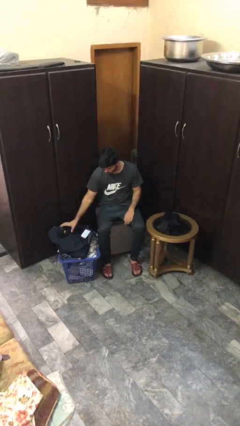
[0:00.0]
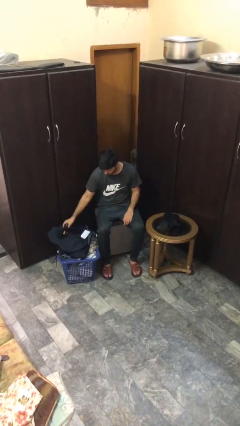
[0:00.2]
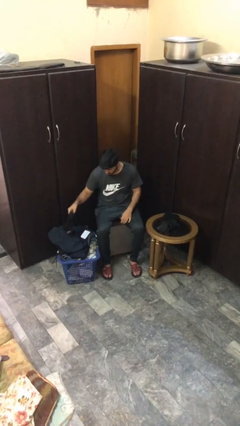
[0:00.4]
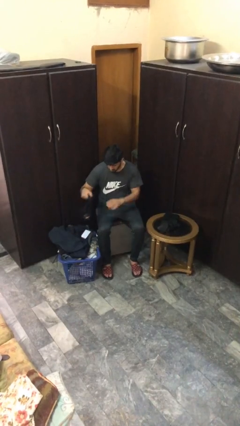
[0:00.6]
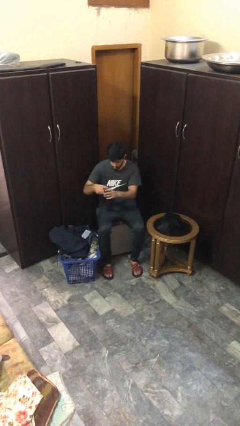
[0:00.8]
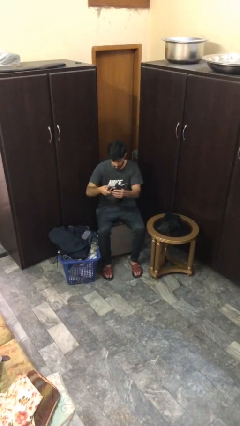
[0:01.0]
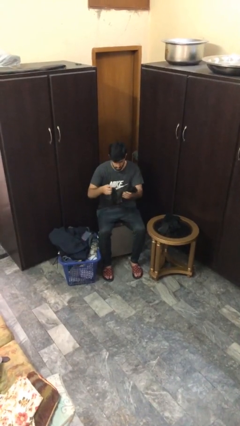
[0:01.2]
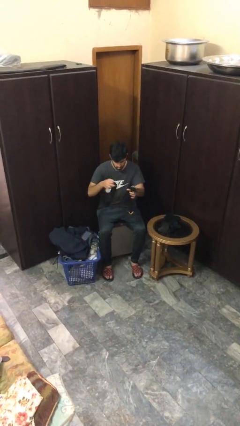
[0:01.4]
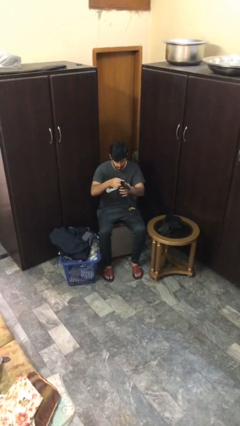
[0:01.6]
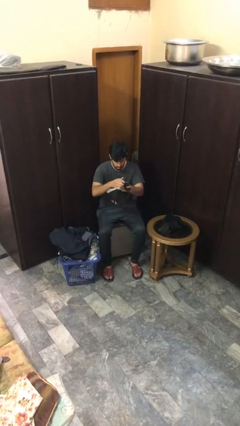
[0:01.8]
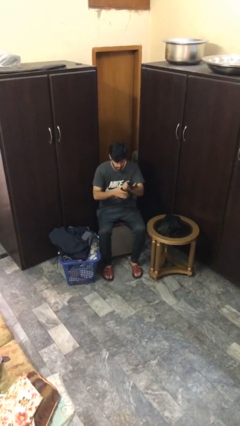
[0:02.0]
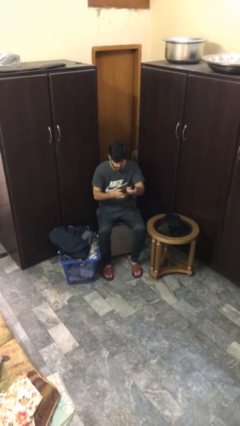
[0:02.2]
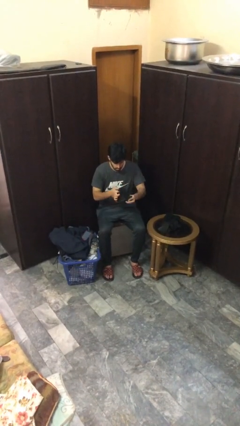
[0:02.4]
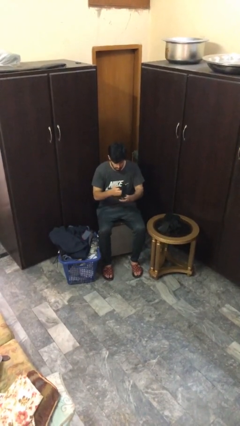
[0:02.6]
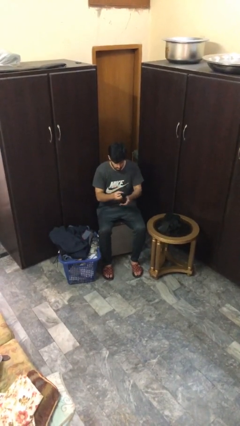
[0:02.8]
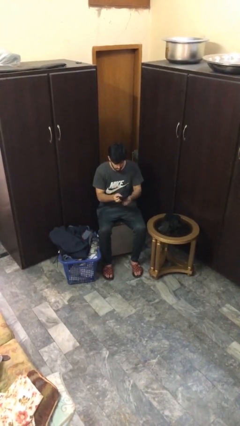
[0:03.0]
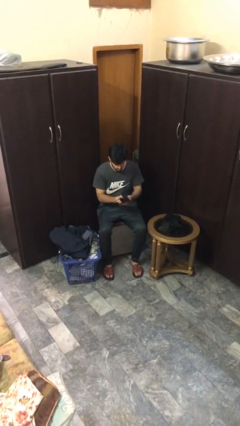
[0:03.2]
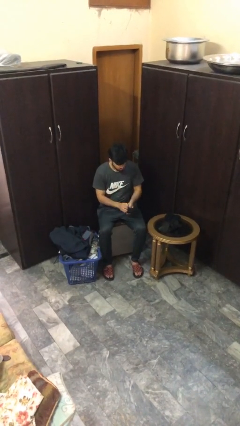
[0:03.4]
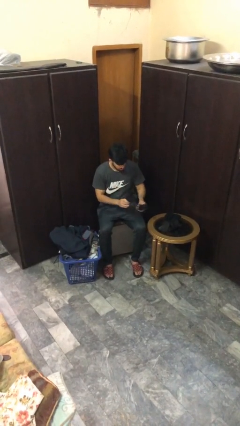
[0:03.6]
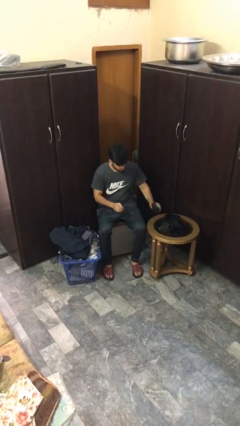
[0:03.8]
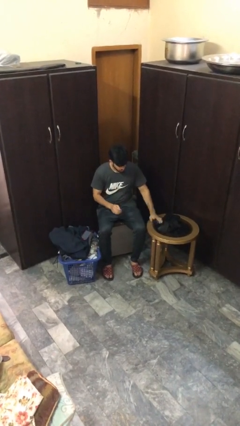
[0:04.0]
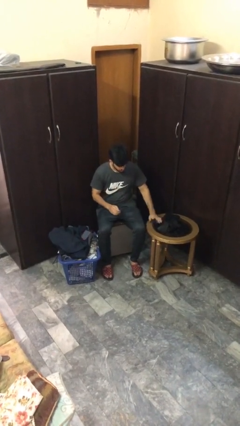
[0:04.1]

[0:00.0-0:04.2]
person folds socks

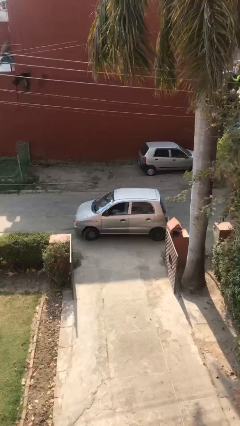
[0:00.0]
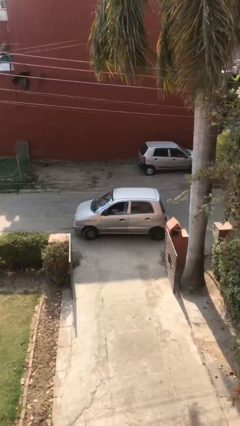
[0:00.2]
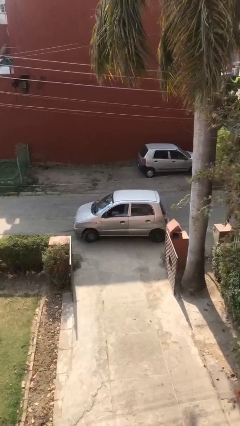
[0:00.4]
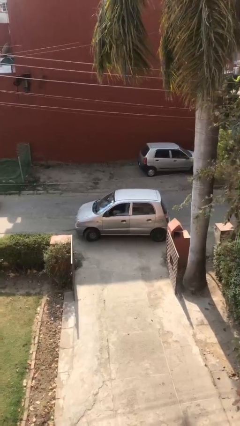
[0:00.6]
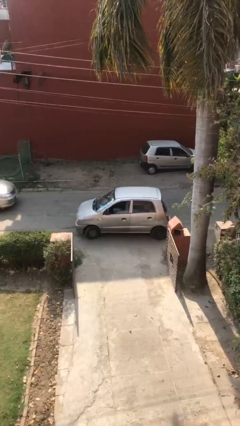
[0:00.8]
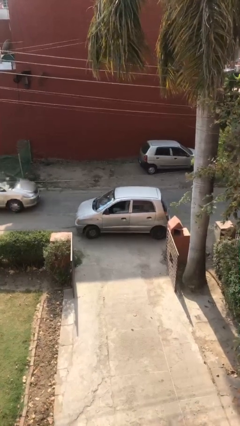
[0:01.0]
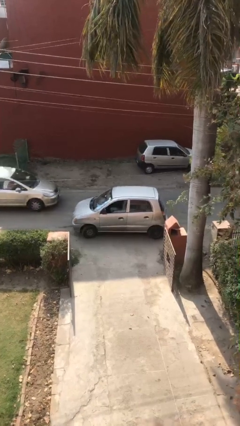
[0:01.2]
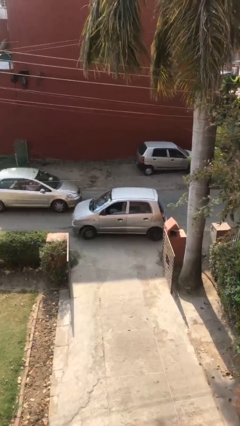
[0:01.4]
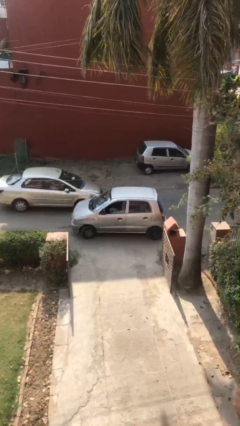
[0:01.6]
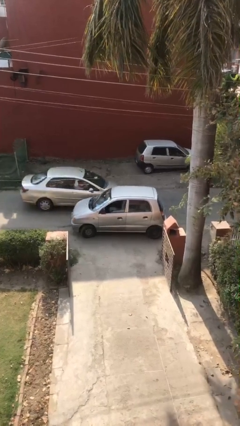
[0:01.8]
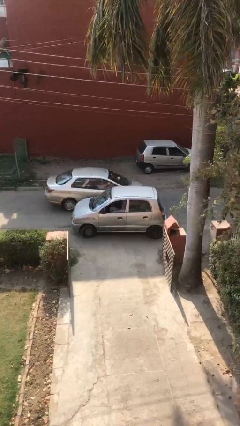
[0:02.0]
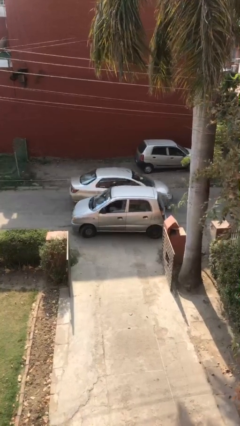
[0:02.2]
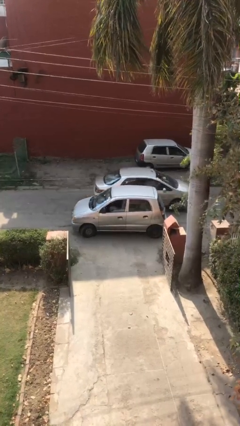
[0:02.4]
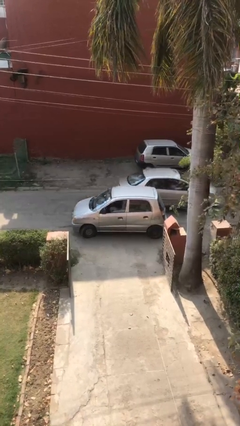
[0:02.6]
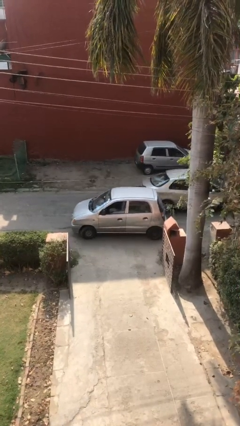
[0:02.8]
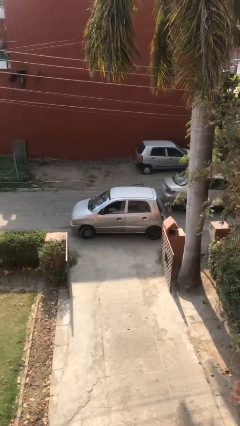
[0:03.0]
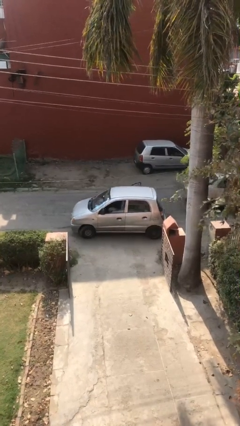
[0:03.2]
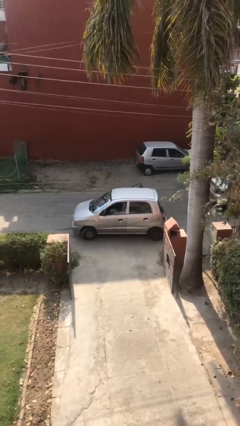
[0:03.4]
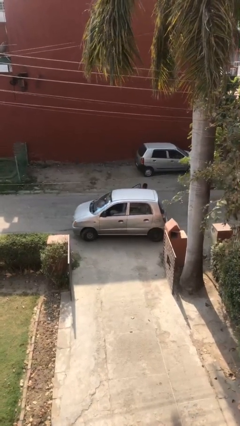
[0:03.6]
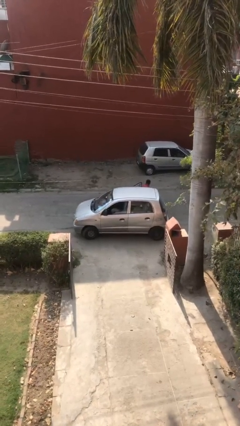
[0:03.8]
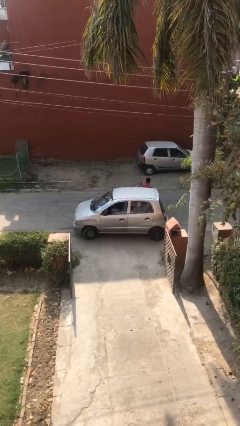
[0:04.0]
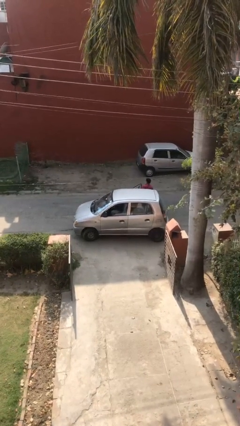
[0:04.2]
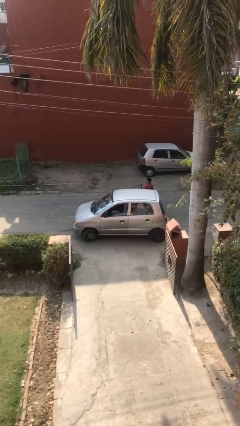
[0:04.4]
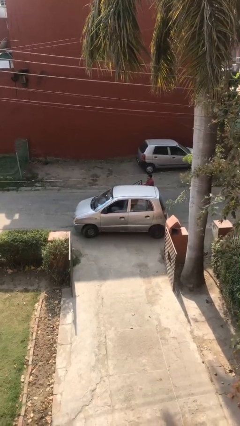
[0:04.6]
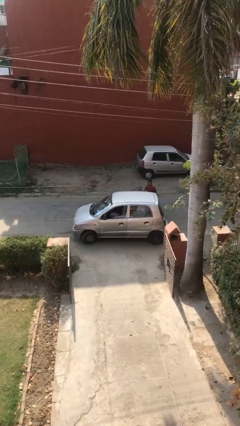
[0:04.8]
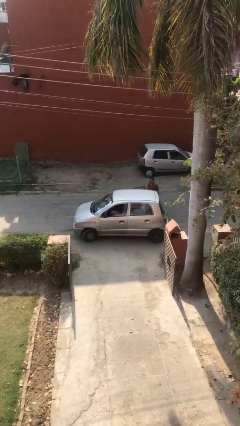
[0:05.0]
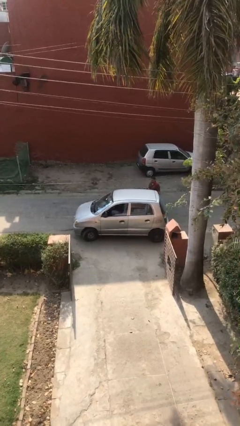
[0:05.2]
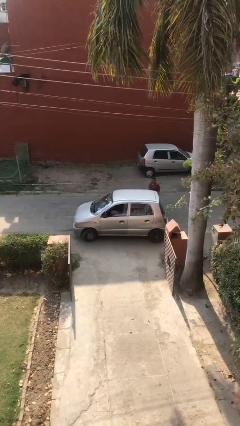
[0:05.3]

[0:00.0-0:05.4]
car drops off person

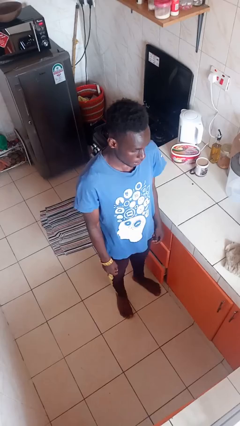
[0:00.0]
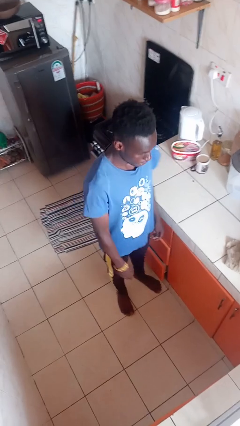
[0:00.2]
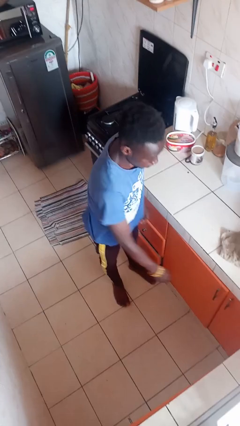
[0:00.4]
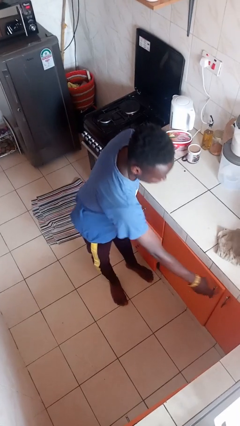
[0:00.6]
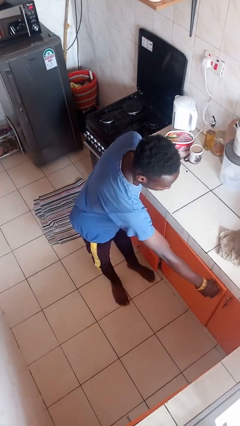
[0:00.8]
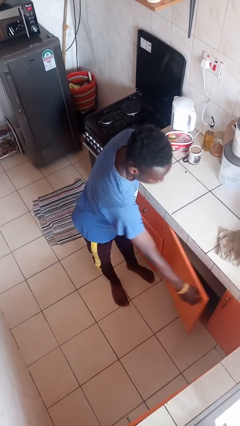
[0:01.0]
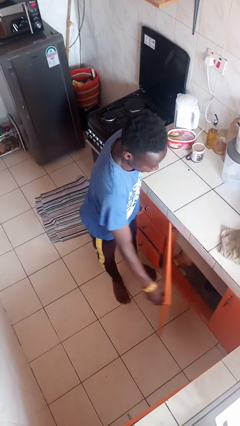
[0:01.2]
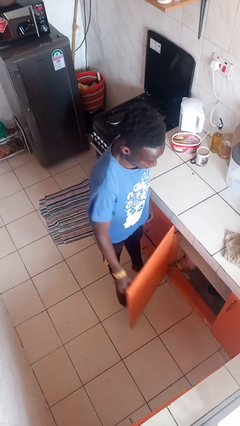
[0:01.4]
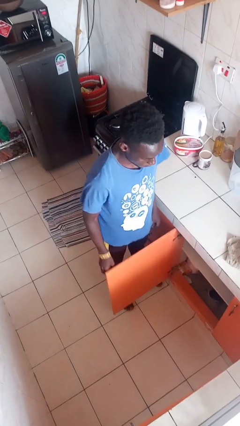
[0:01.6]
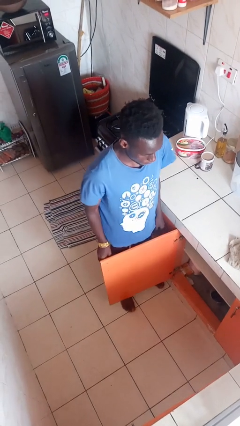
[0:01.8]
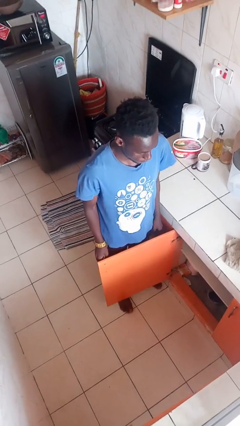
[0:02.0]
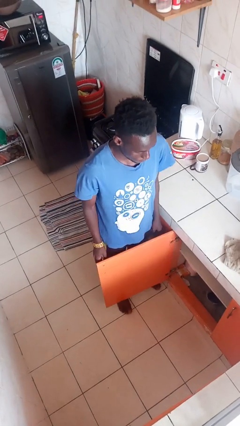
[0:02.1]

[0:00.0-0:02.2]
person opens cabinet

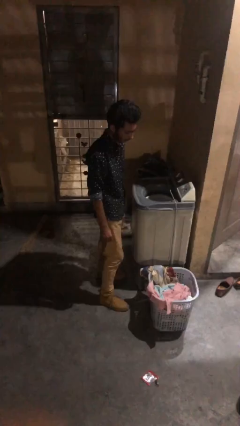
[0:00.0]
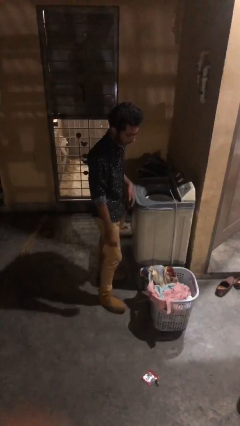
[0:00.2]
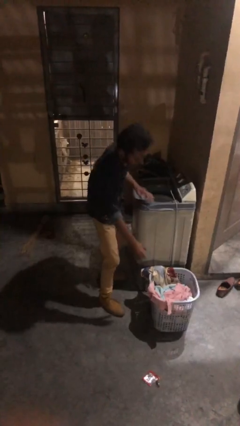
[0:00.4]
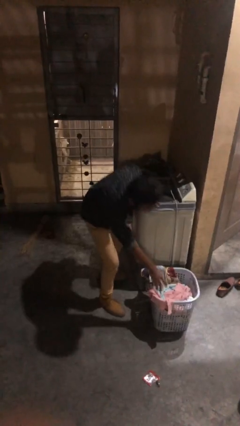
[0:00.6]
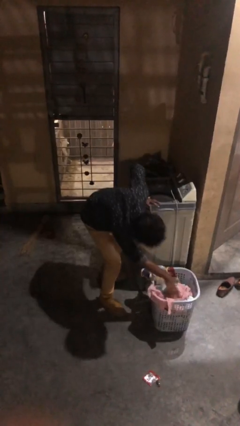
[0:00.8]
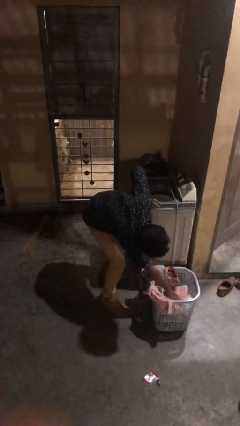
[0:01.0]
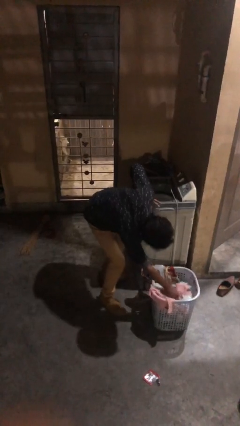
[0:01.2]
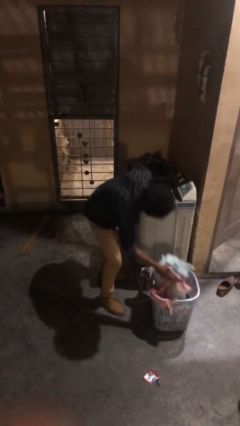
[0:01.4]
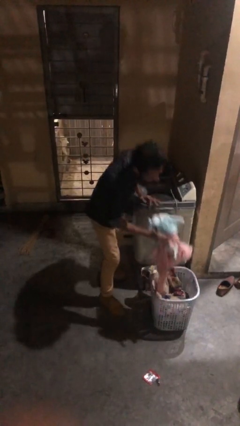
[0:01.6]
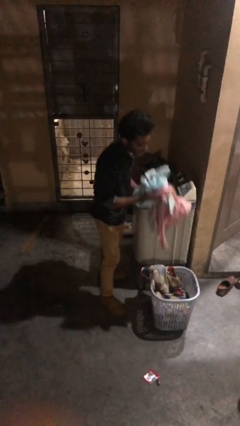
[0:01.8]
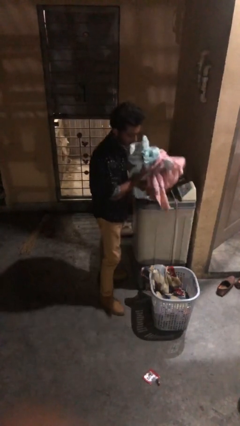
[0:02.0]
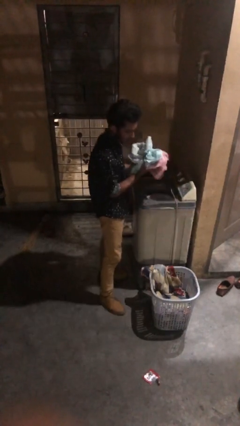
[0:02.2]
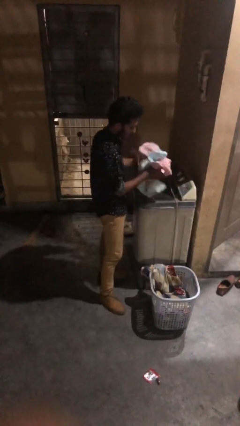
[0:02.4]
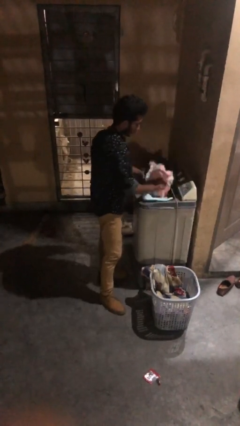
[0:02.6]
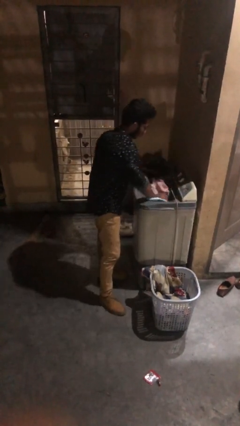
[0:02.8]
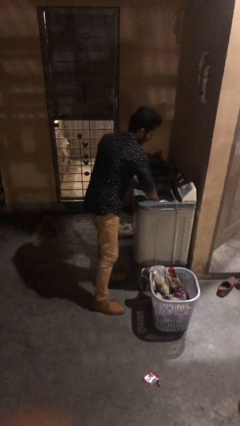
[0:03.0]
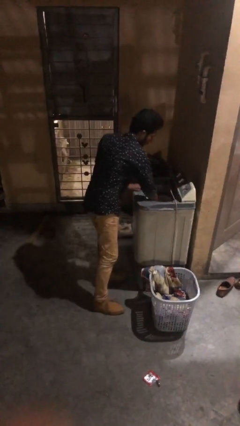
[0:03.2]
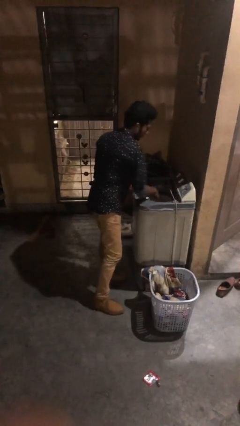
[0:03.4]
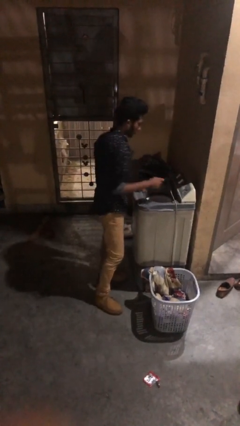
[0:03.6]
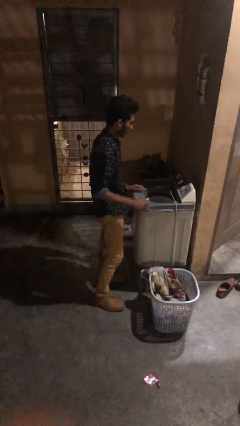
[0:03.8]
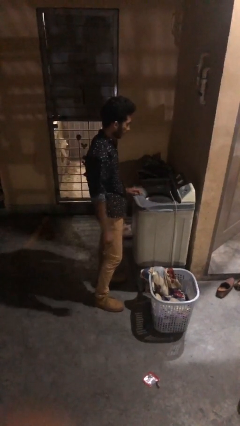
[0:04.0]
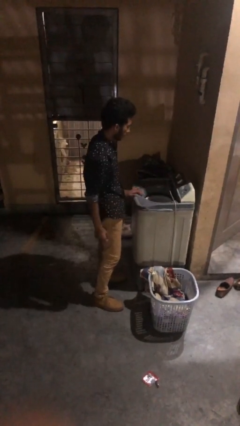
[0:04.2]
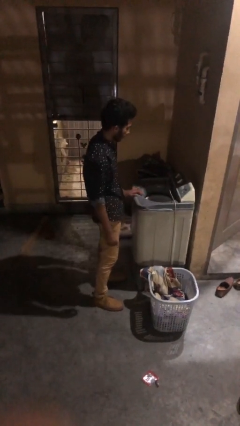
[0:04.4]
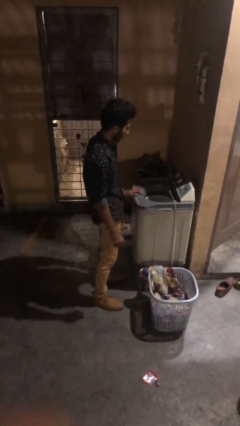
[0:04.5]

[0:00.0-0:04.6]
person loads clotheswasher

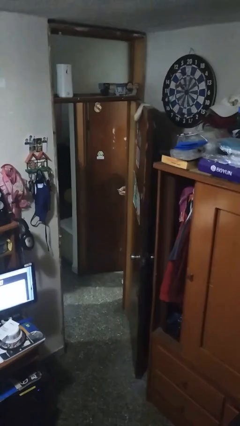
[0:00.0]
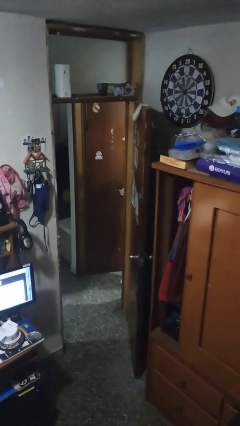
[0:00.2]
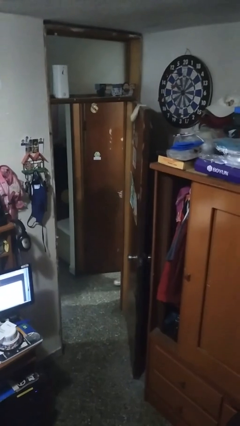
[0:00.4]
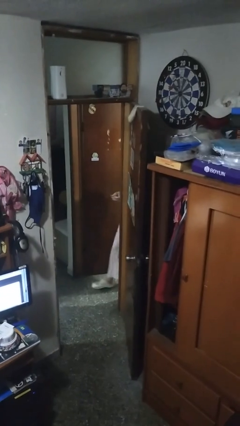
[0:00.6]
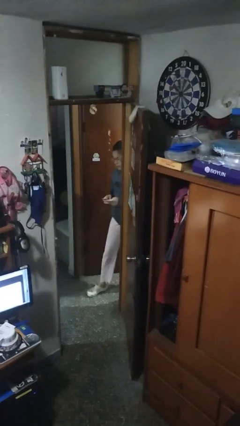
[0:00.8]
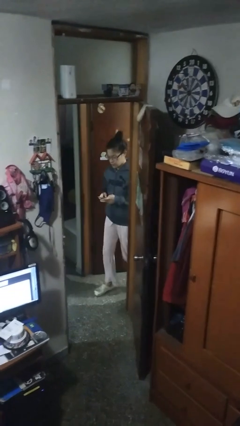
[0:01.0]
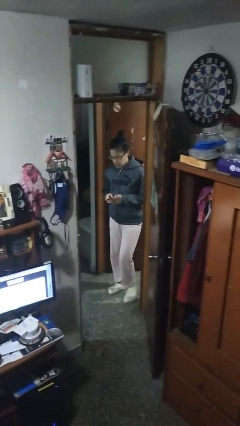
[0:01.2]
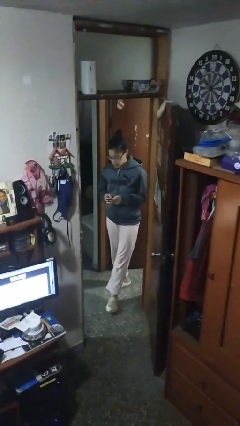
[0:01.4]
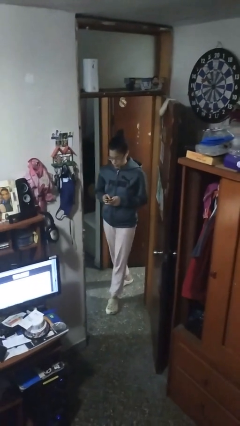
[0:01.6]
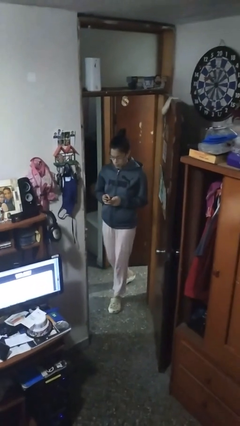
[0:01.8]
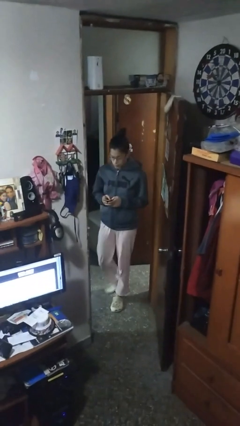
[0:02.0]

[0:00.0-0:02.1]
person enters scene through structure
